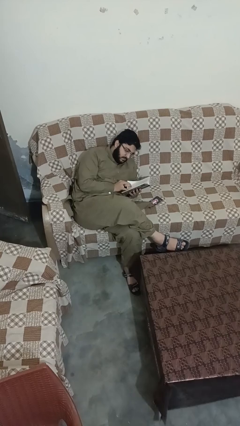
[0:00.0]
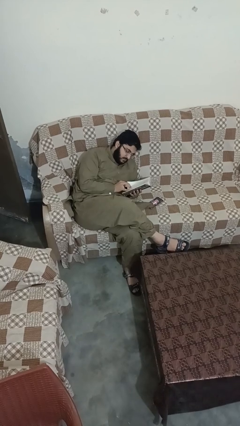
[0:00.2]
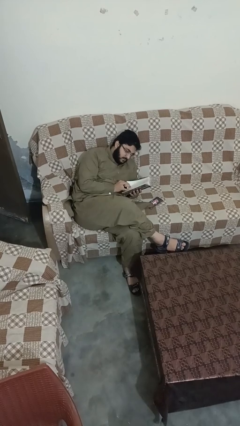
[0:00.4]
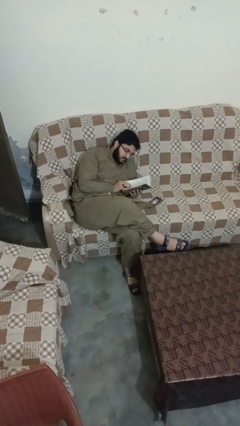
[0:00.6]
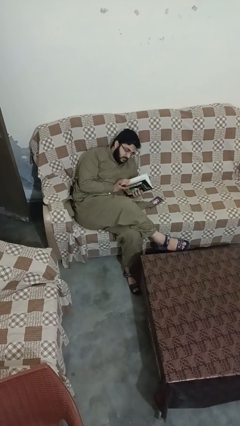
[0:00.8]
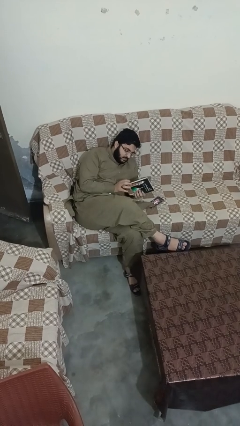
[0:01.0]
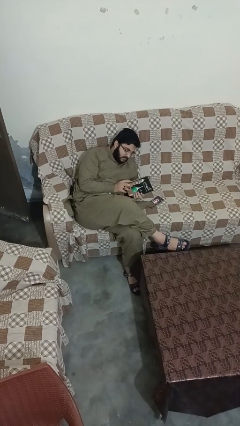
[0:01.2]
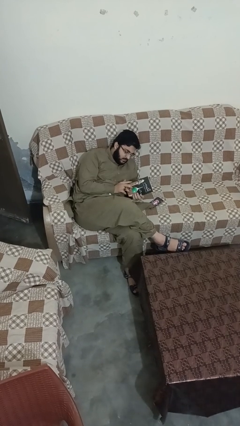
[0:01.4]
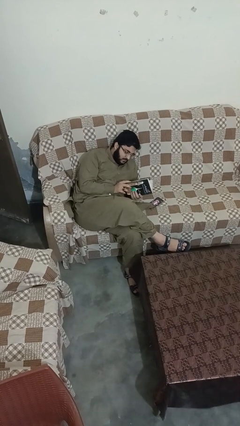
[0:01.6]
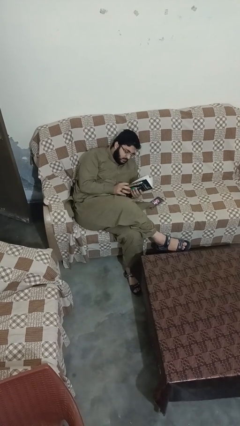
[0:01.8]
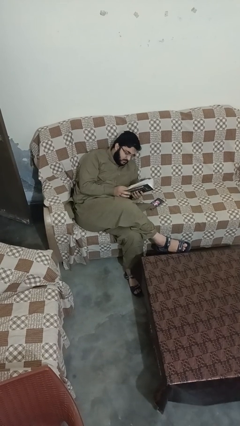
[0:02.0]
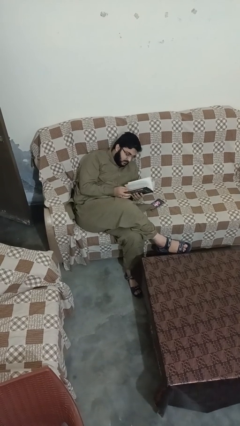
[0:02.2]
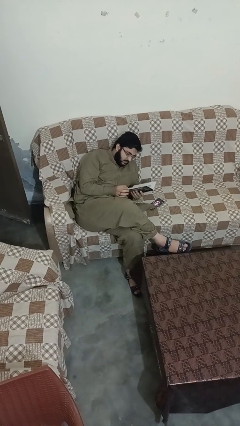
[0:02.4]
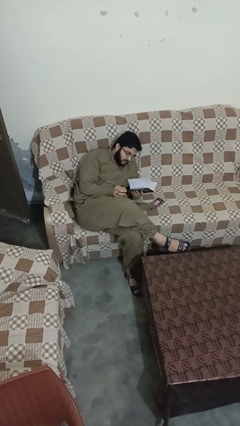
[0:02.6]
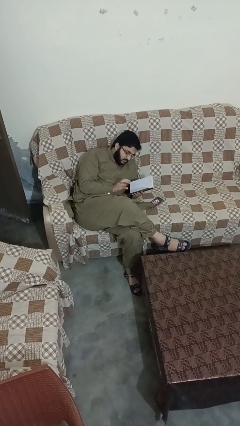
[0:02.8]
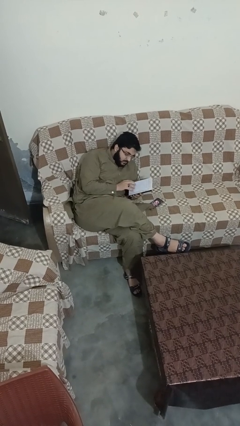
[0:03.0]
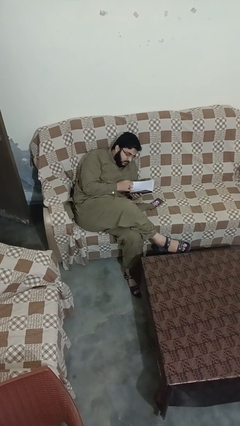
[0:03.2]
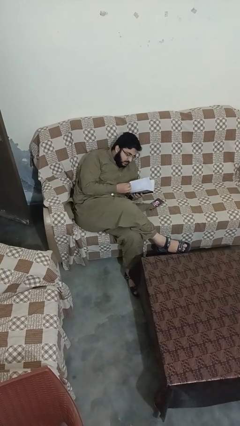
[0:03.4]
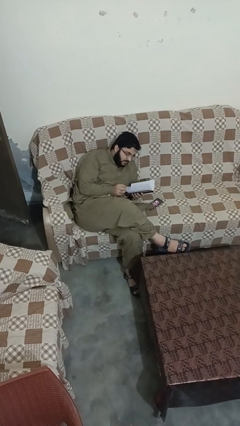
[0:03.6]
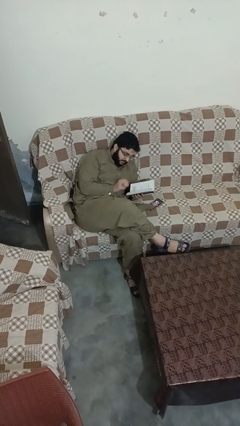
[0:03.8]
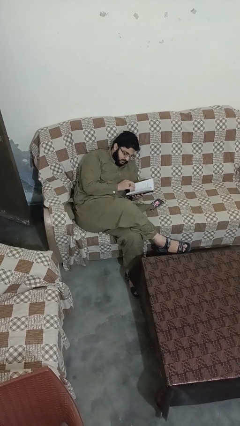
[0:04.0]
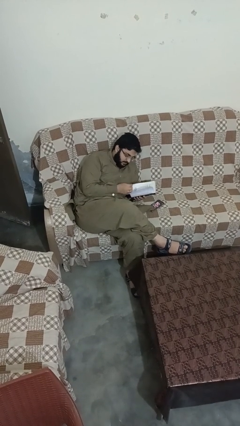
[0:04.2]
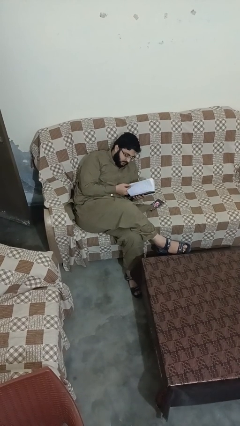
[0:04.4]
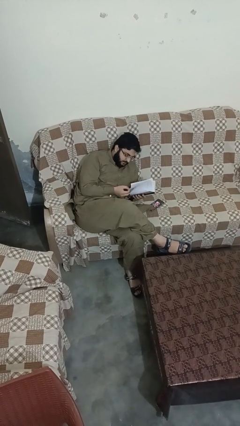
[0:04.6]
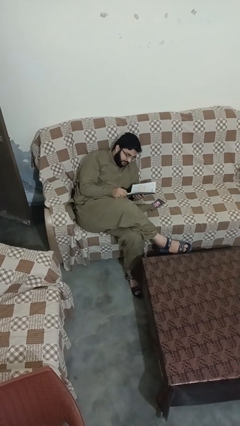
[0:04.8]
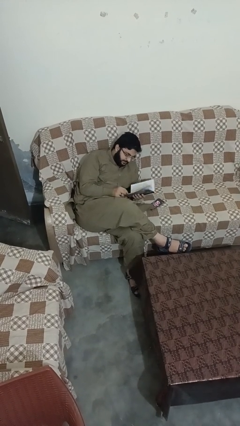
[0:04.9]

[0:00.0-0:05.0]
person reads book

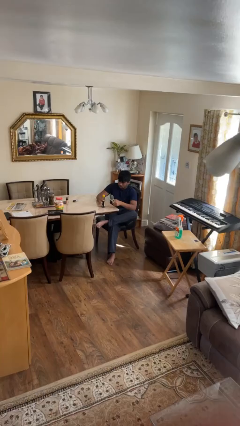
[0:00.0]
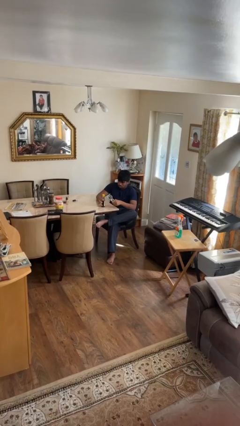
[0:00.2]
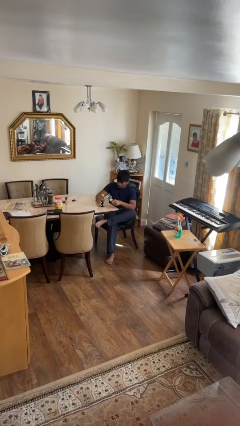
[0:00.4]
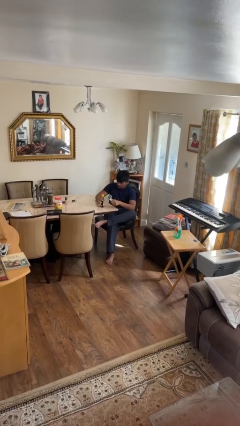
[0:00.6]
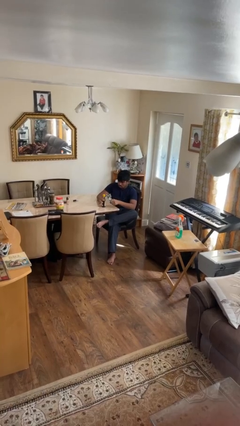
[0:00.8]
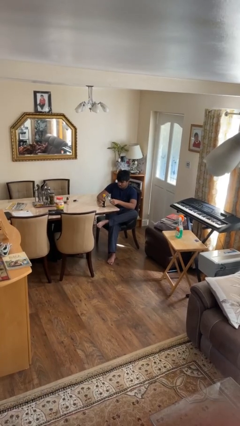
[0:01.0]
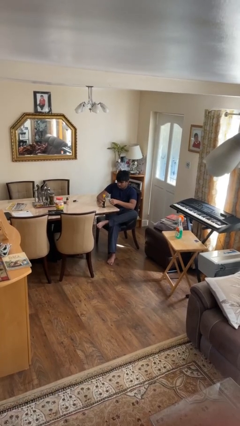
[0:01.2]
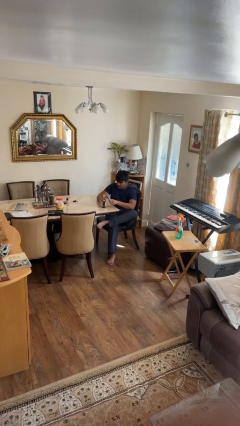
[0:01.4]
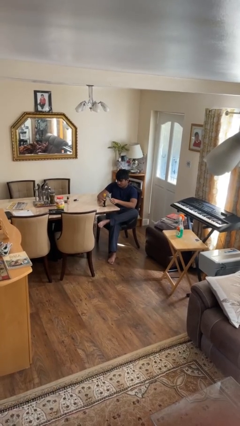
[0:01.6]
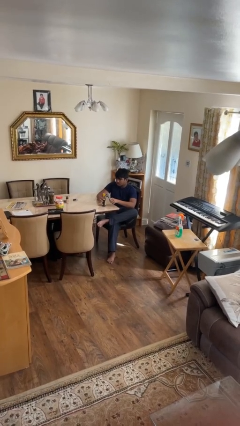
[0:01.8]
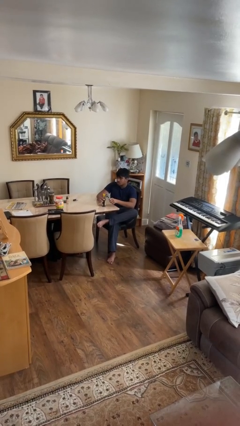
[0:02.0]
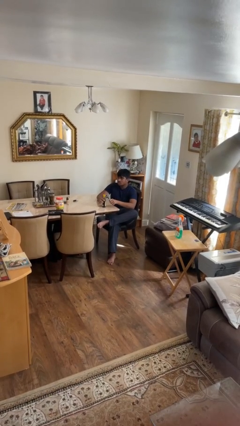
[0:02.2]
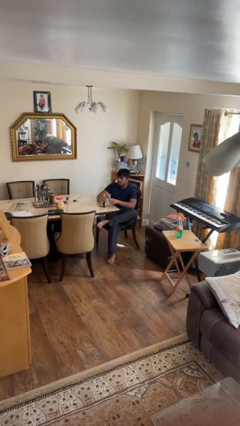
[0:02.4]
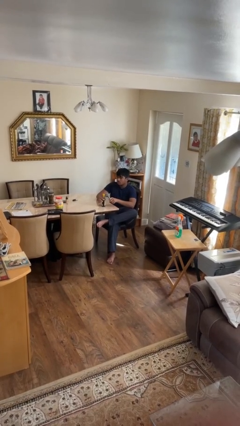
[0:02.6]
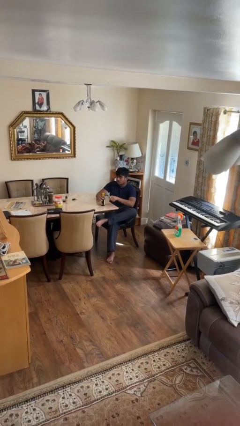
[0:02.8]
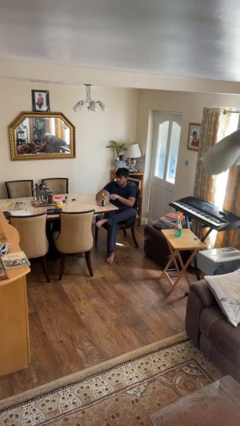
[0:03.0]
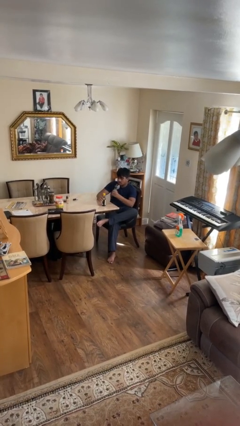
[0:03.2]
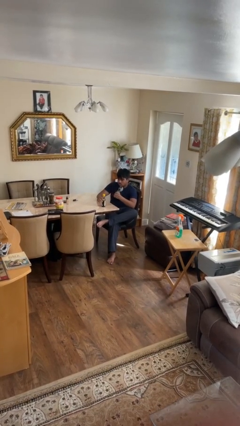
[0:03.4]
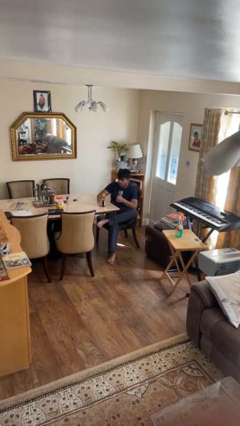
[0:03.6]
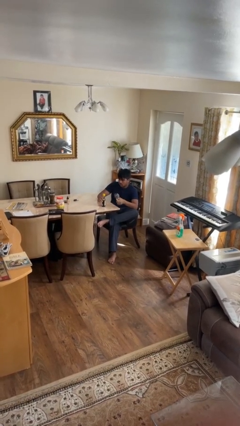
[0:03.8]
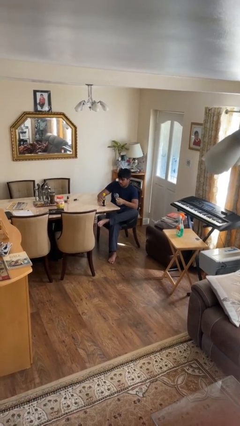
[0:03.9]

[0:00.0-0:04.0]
person opens can with can opener

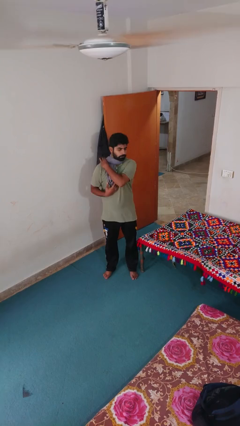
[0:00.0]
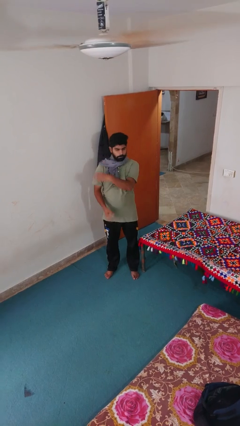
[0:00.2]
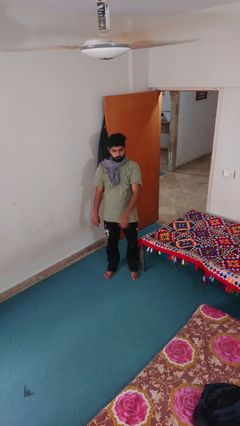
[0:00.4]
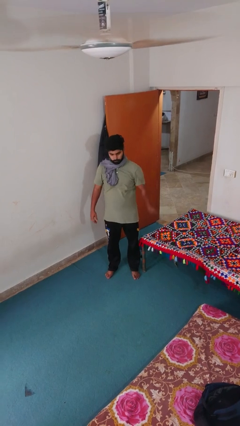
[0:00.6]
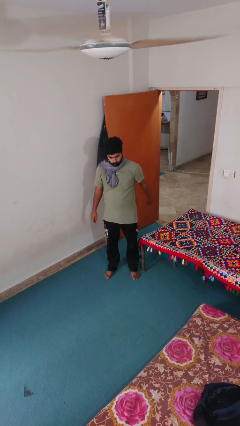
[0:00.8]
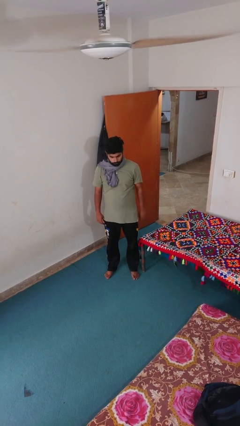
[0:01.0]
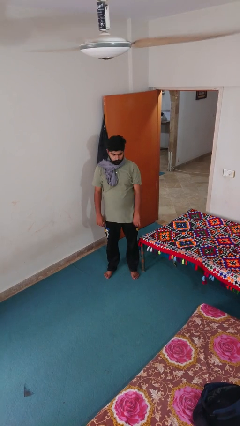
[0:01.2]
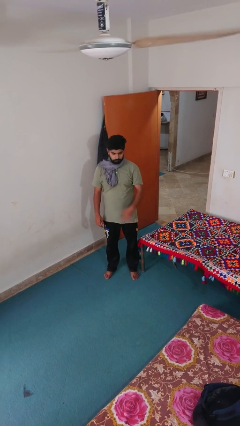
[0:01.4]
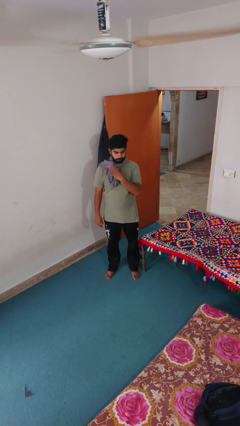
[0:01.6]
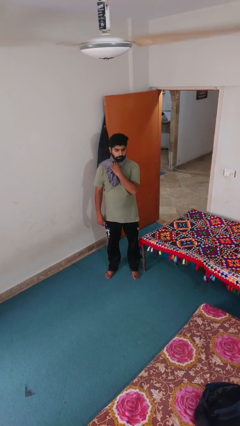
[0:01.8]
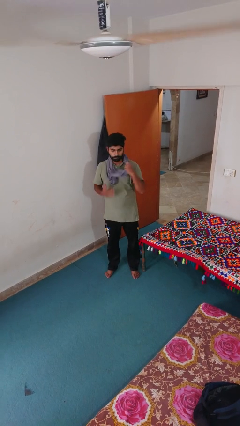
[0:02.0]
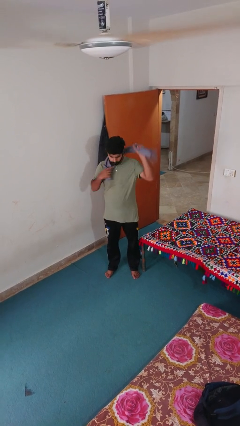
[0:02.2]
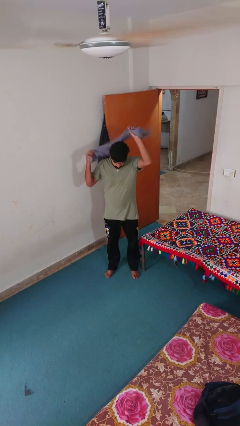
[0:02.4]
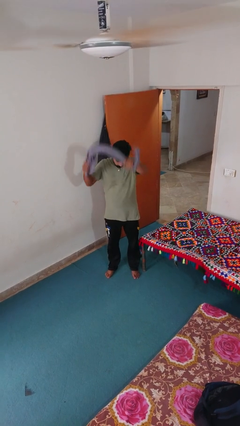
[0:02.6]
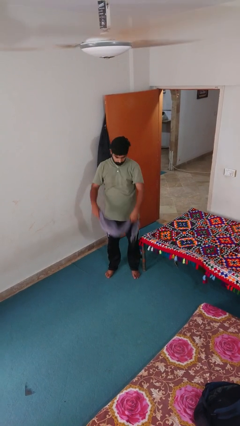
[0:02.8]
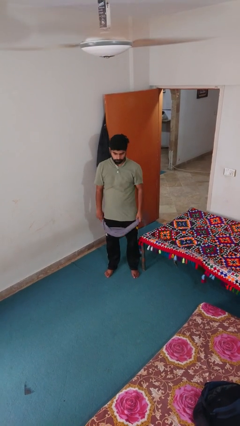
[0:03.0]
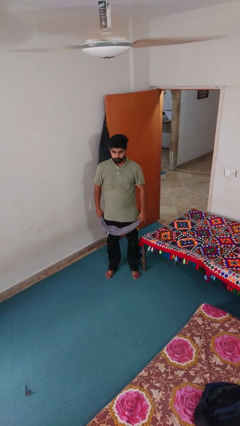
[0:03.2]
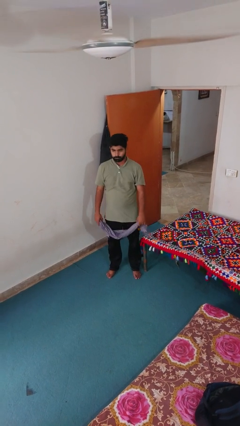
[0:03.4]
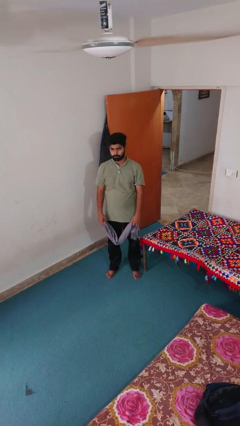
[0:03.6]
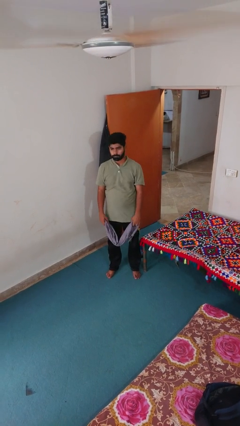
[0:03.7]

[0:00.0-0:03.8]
person takes off scarf

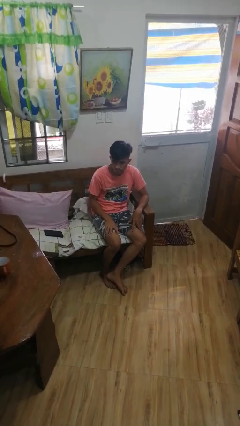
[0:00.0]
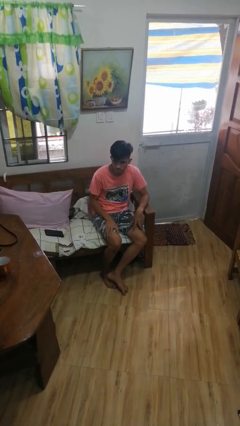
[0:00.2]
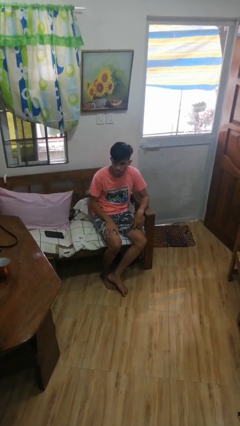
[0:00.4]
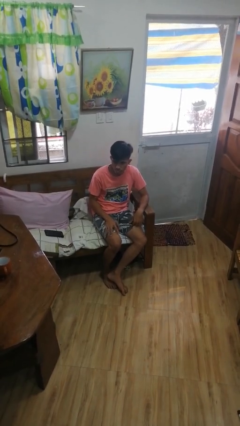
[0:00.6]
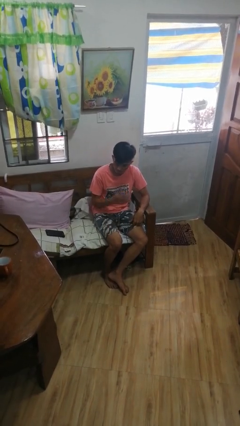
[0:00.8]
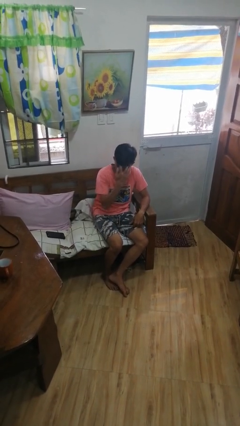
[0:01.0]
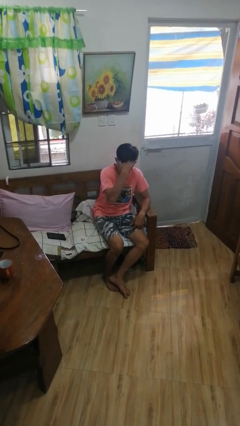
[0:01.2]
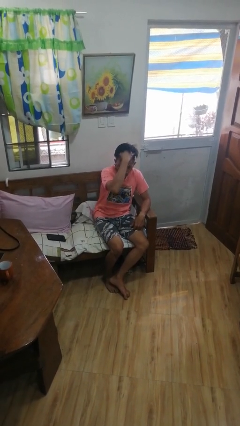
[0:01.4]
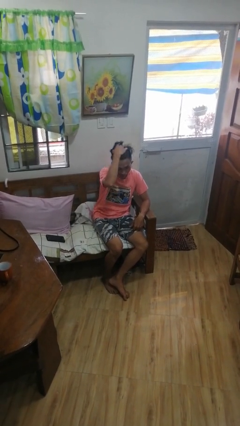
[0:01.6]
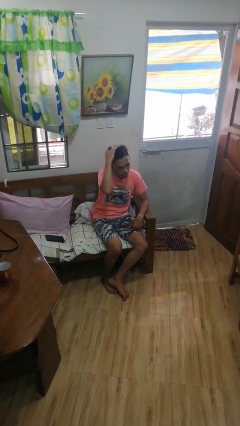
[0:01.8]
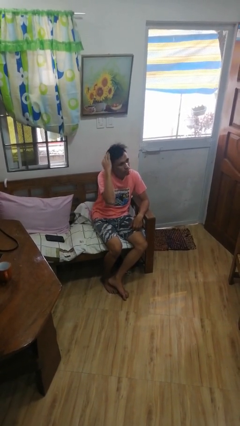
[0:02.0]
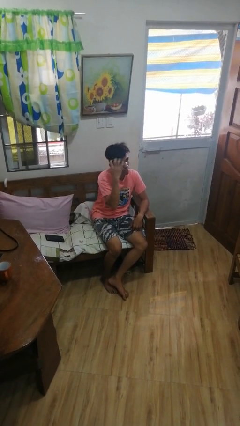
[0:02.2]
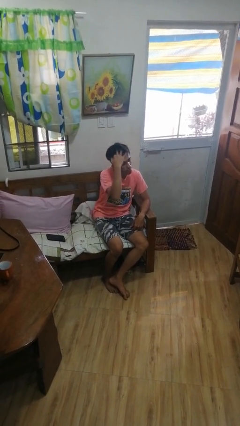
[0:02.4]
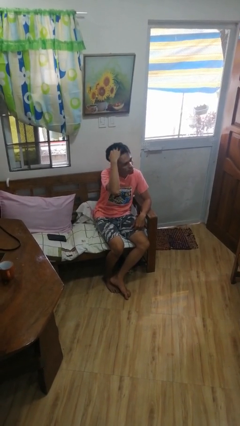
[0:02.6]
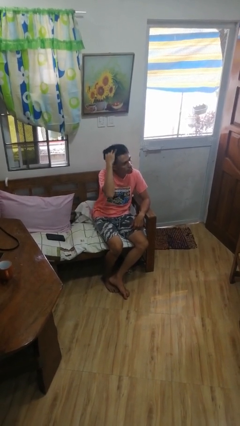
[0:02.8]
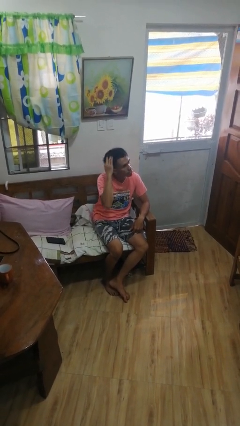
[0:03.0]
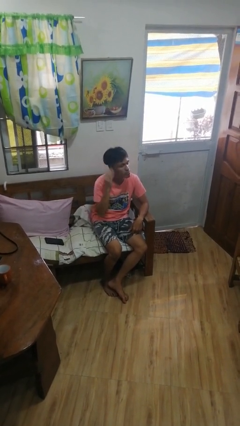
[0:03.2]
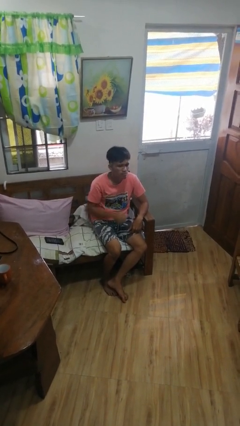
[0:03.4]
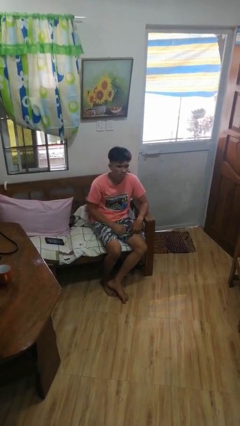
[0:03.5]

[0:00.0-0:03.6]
person strokes hair

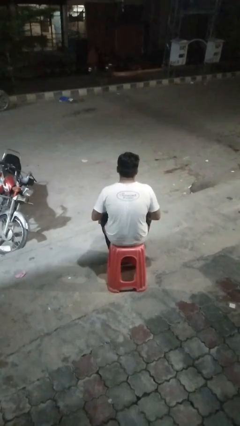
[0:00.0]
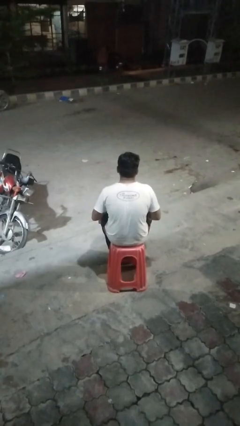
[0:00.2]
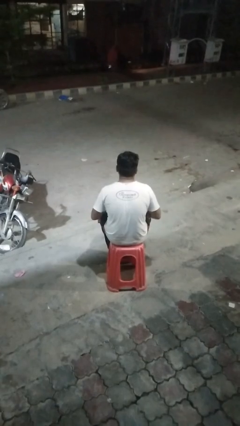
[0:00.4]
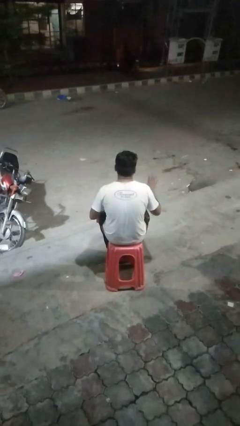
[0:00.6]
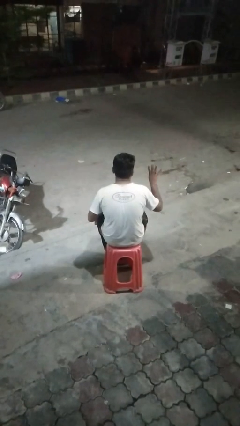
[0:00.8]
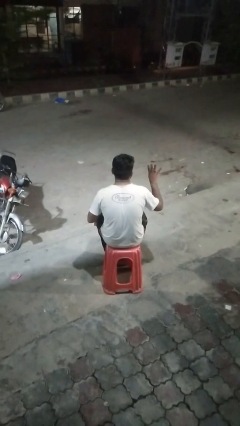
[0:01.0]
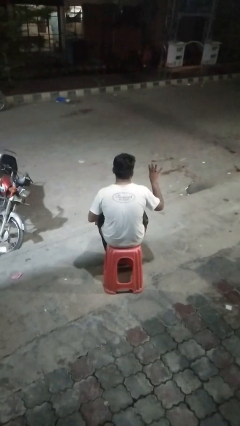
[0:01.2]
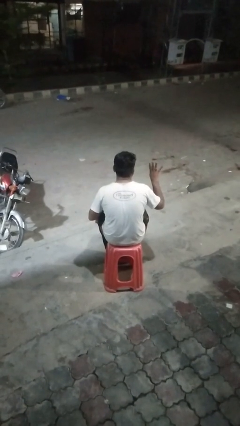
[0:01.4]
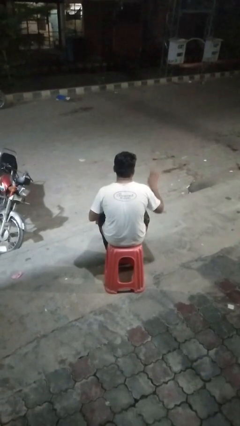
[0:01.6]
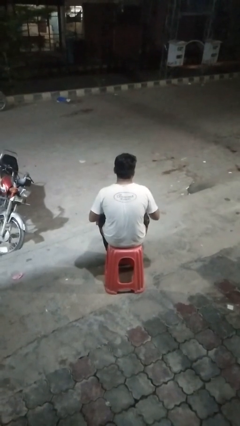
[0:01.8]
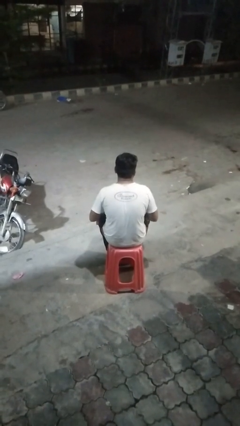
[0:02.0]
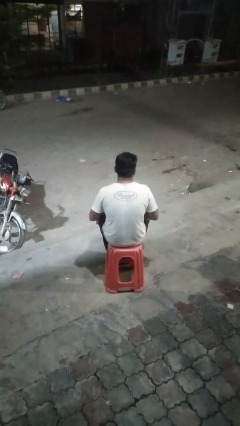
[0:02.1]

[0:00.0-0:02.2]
person gestures number four
